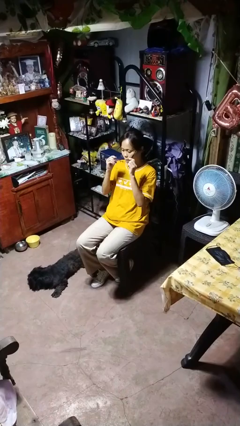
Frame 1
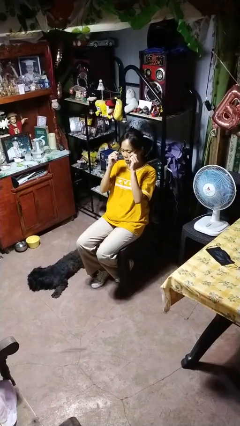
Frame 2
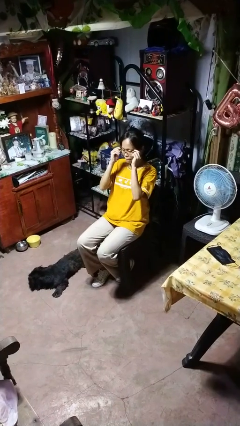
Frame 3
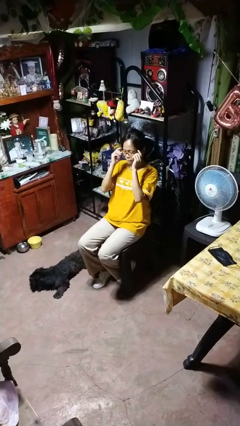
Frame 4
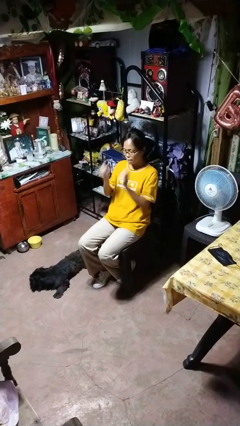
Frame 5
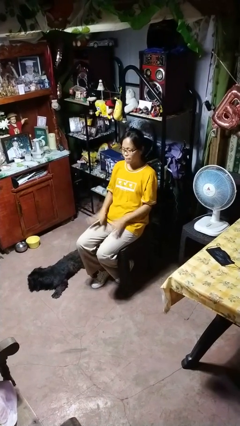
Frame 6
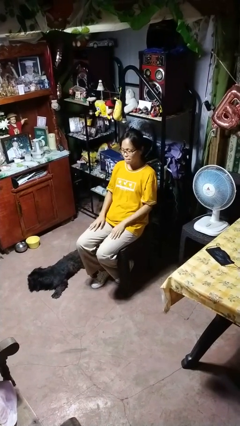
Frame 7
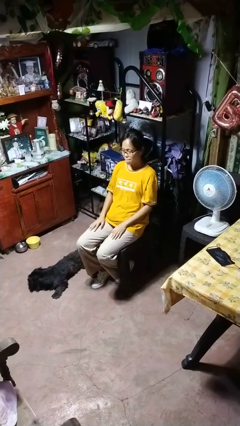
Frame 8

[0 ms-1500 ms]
person puts on glasses

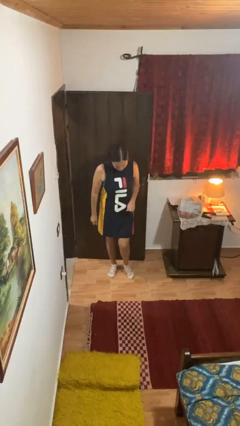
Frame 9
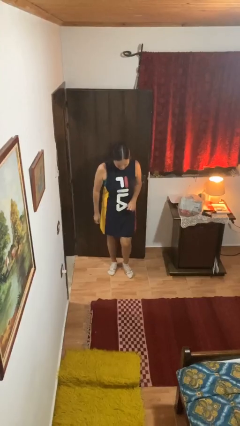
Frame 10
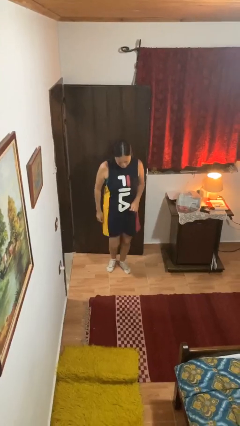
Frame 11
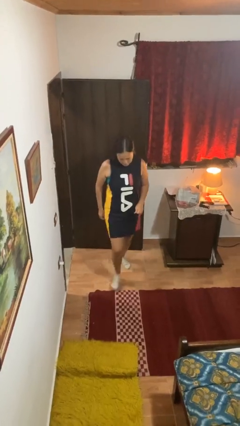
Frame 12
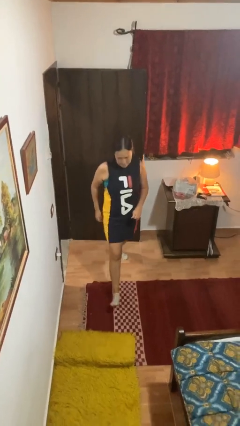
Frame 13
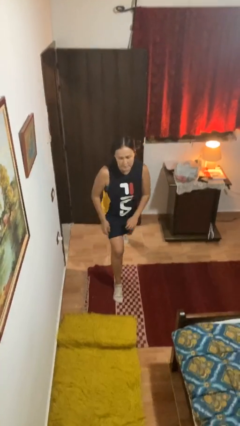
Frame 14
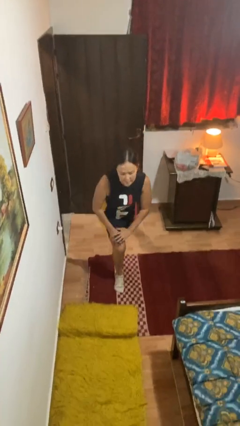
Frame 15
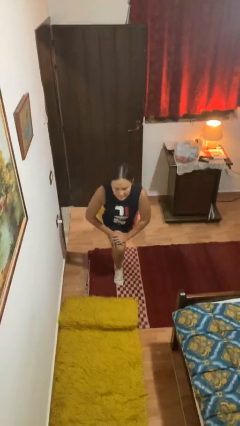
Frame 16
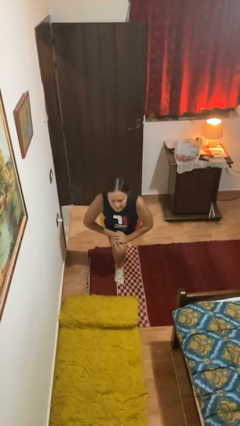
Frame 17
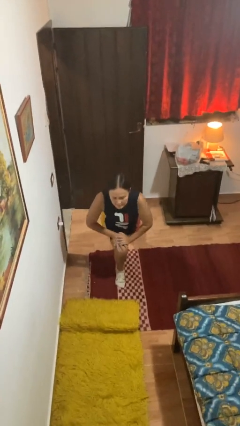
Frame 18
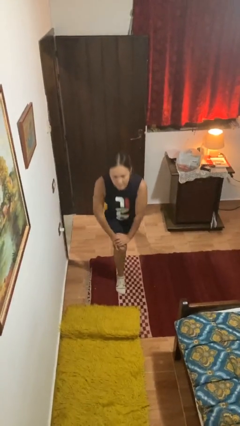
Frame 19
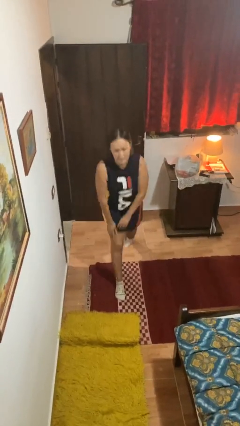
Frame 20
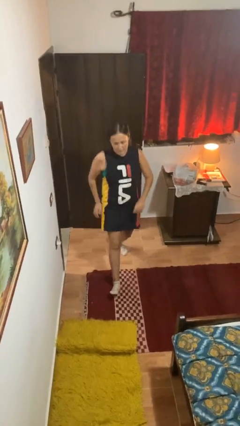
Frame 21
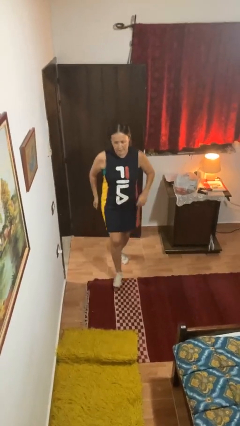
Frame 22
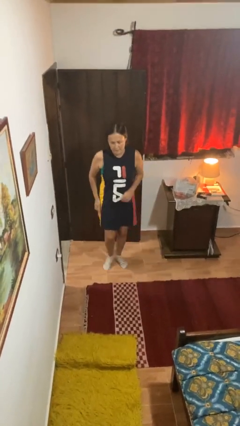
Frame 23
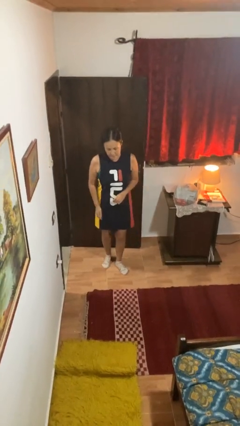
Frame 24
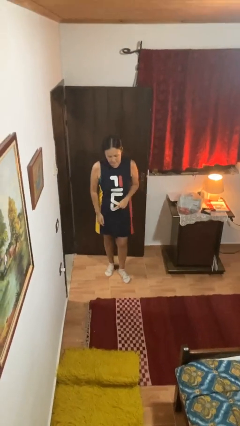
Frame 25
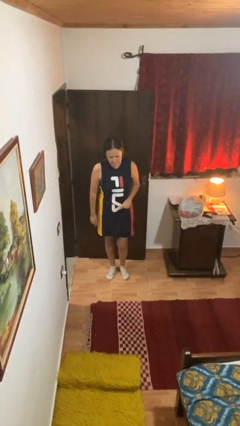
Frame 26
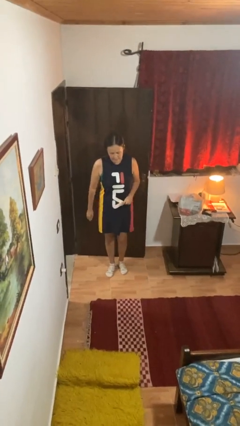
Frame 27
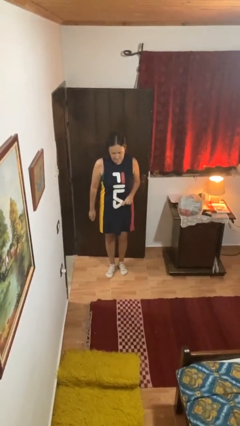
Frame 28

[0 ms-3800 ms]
person exercises with lunges

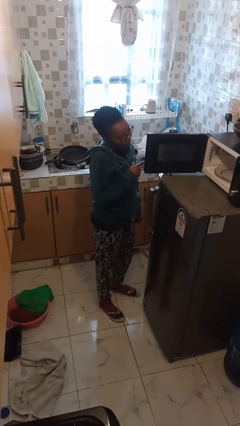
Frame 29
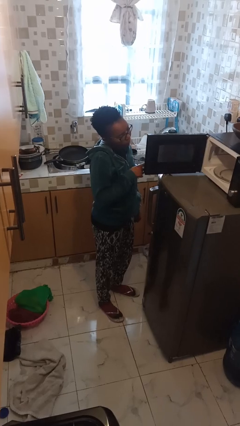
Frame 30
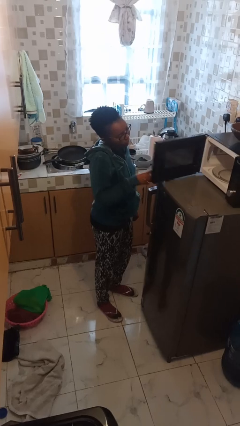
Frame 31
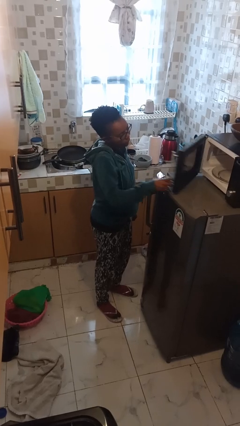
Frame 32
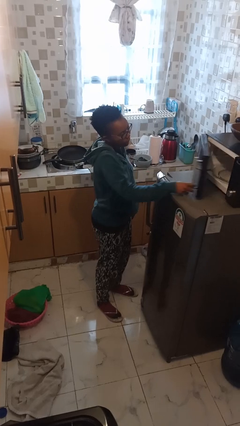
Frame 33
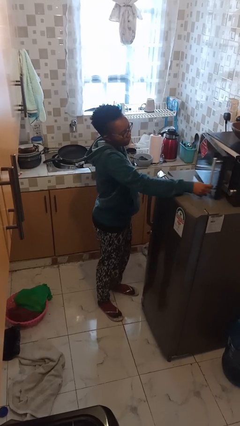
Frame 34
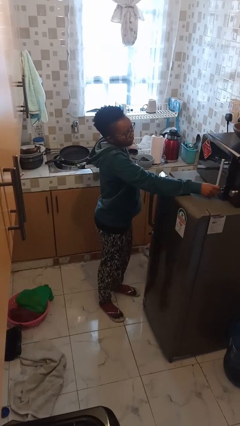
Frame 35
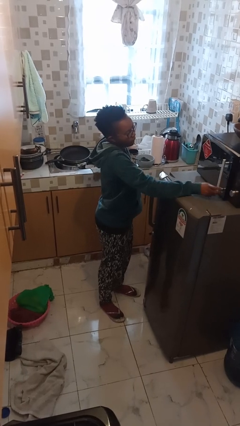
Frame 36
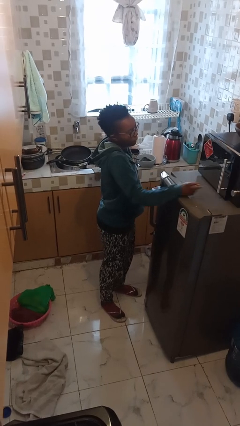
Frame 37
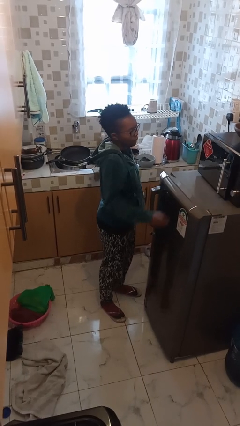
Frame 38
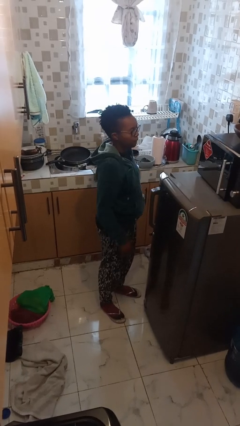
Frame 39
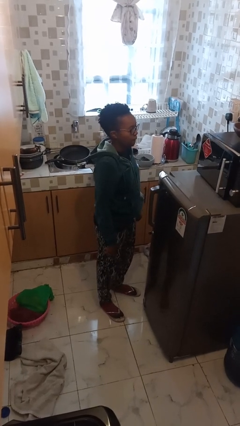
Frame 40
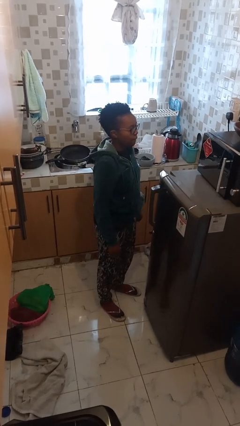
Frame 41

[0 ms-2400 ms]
person closes microwave

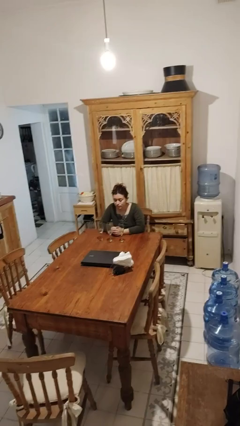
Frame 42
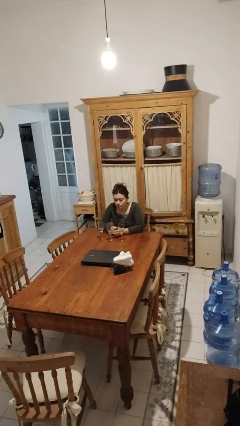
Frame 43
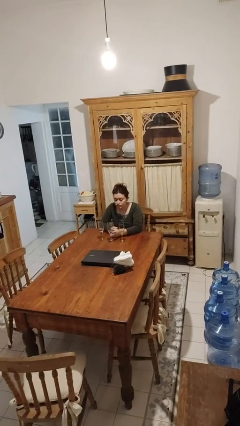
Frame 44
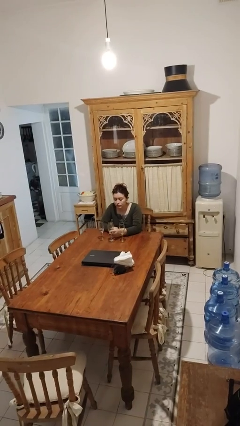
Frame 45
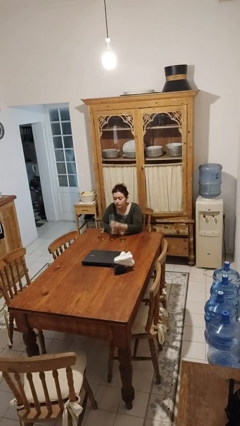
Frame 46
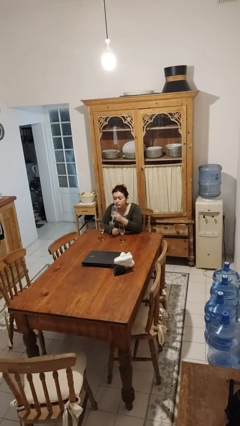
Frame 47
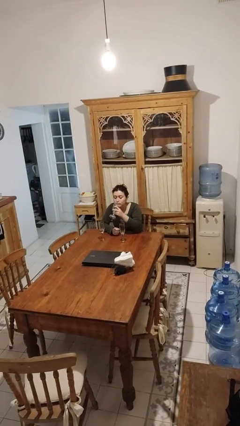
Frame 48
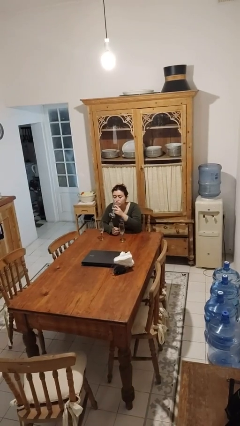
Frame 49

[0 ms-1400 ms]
person picks up object from table

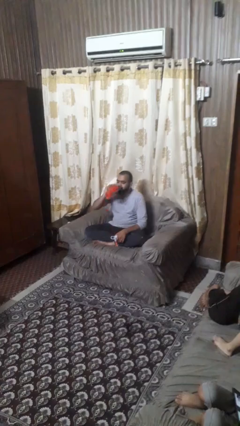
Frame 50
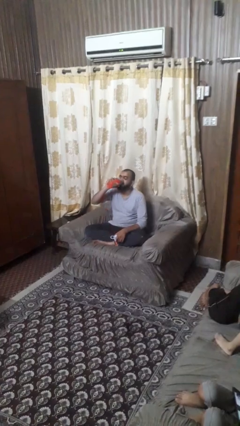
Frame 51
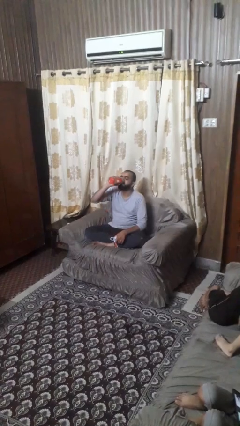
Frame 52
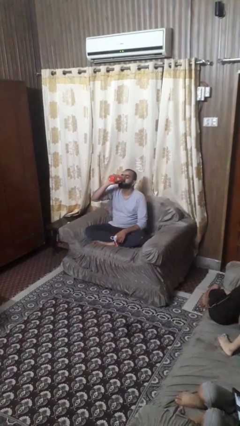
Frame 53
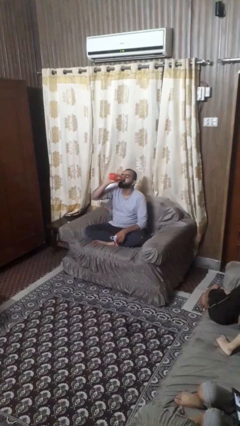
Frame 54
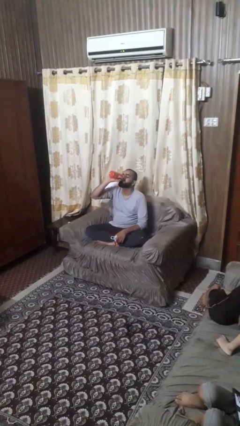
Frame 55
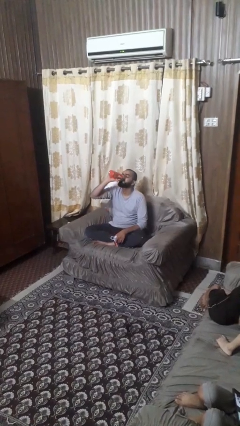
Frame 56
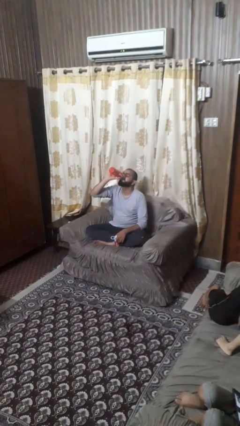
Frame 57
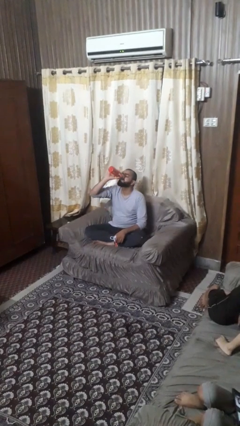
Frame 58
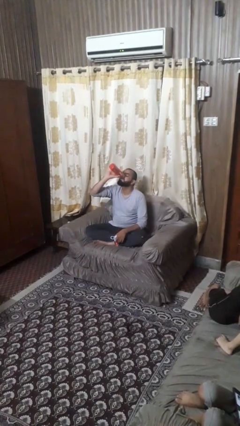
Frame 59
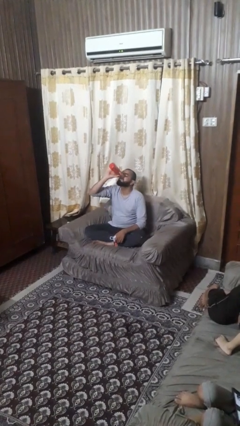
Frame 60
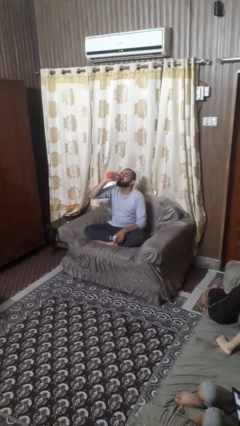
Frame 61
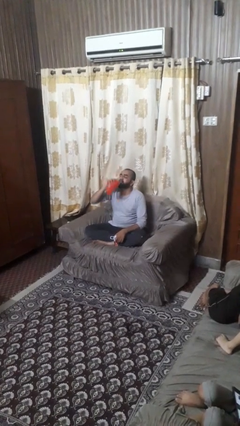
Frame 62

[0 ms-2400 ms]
person drinks from bottle

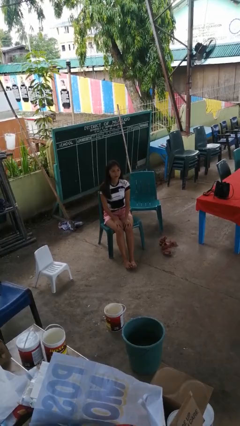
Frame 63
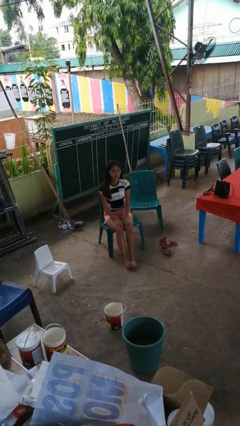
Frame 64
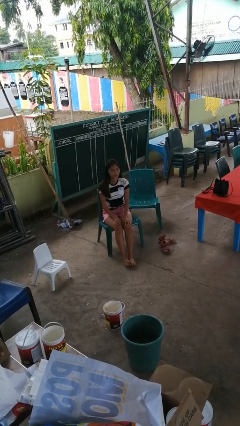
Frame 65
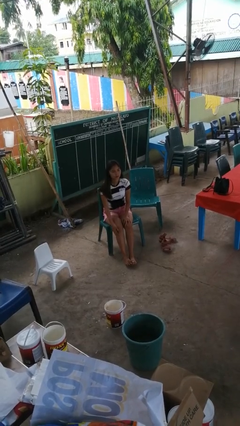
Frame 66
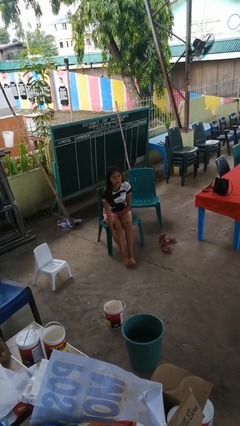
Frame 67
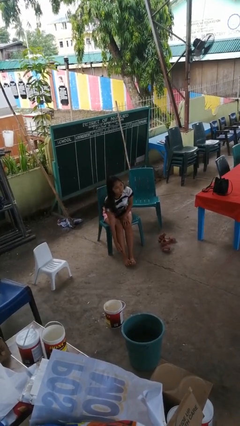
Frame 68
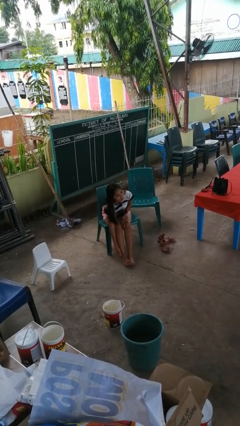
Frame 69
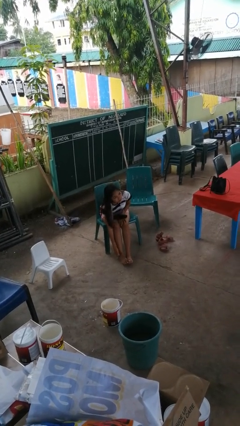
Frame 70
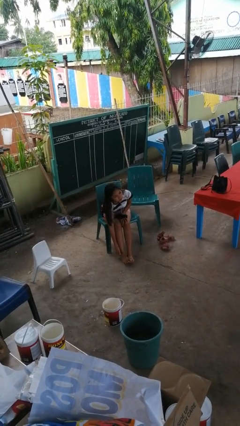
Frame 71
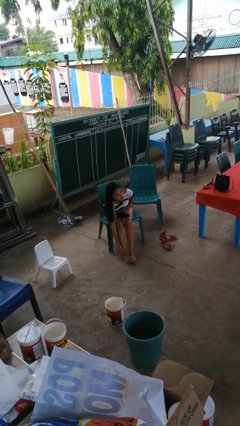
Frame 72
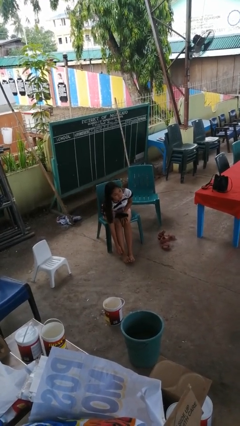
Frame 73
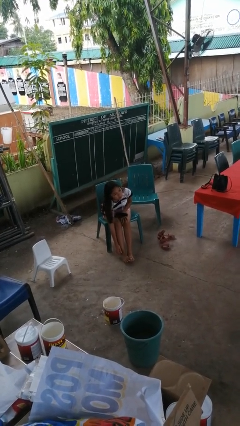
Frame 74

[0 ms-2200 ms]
person rubs foot

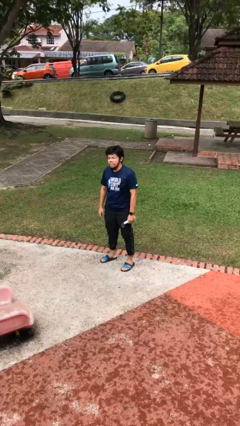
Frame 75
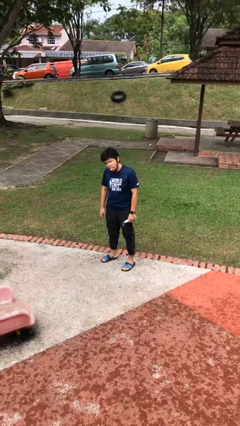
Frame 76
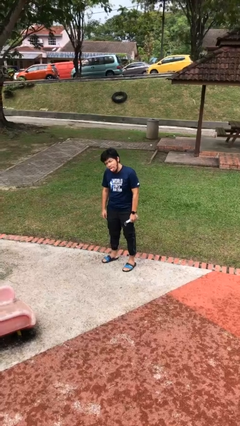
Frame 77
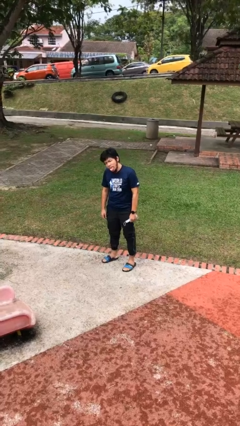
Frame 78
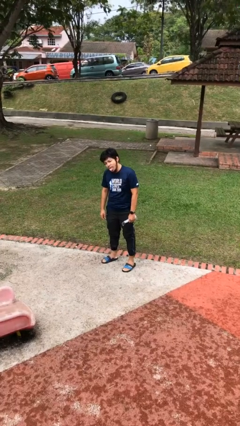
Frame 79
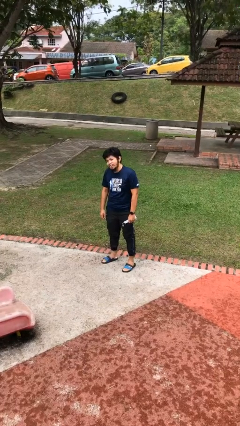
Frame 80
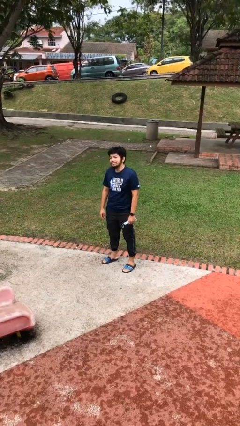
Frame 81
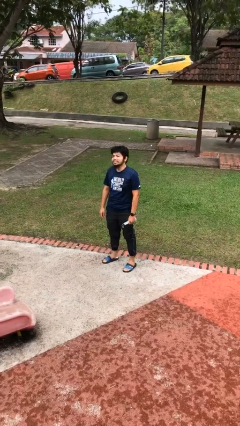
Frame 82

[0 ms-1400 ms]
person sticks out tongue

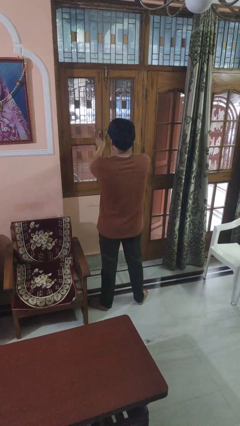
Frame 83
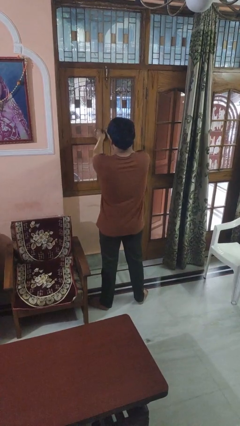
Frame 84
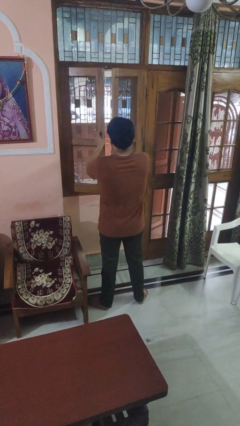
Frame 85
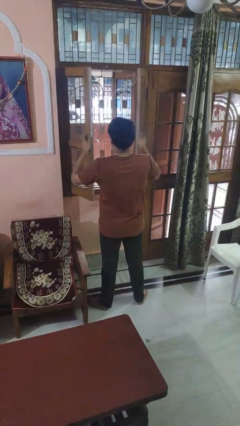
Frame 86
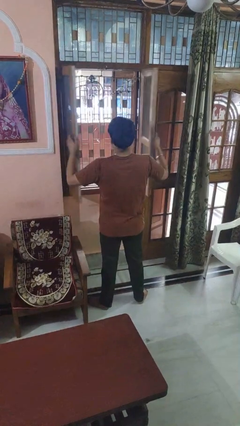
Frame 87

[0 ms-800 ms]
person opens home window

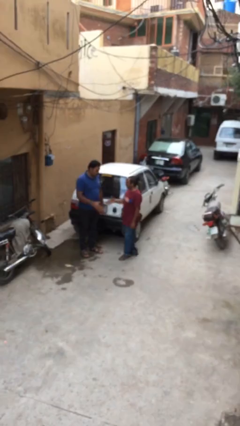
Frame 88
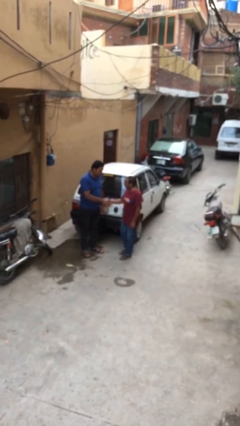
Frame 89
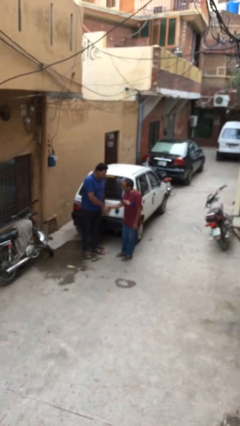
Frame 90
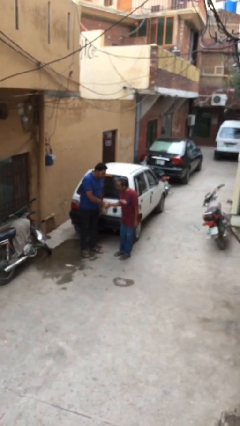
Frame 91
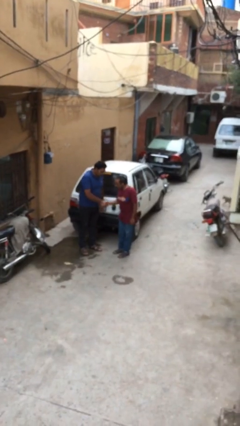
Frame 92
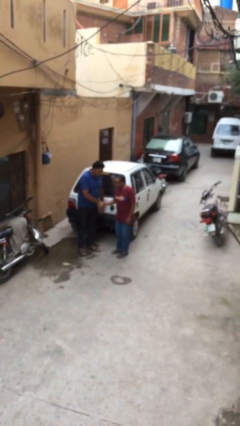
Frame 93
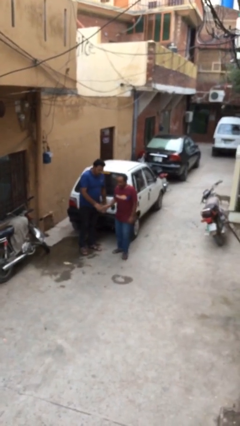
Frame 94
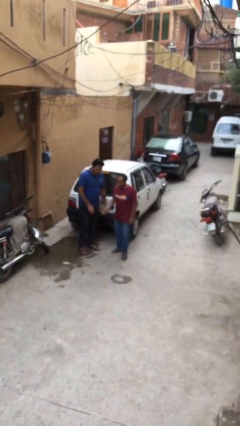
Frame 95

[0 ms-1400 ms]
person shakes hand
